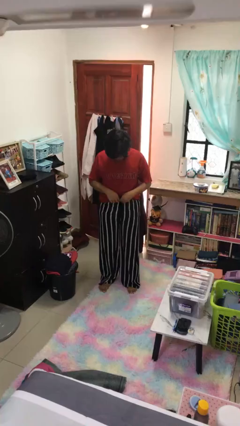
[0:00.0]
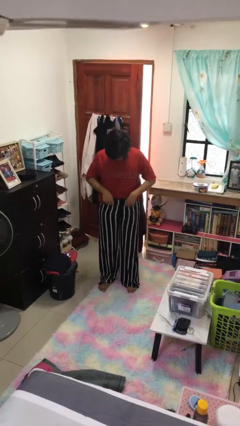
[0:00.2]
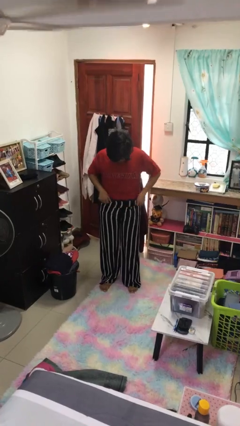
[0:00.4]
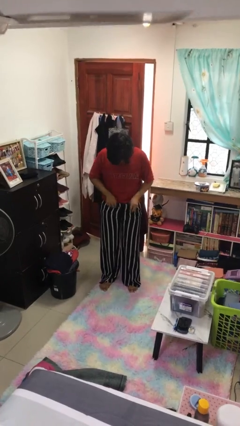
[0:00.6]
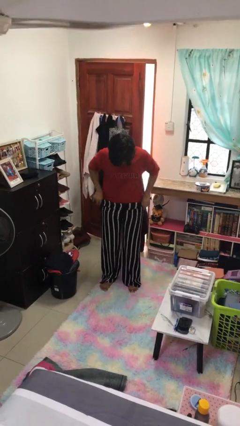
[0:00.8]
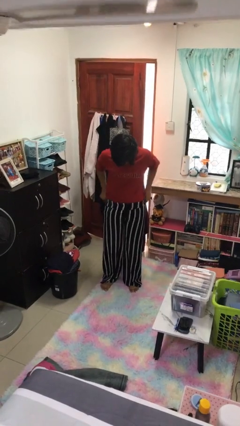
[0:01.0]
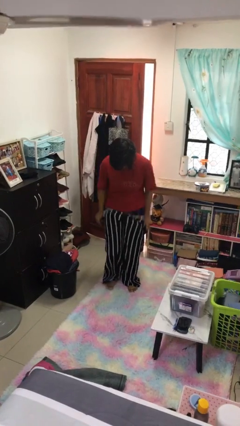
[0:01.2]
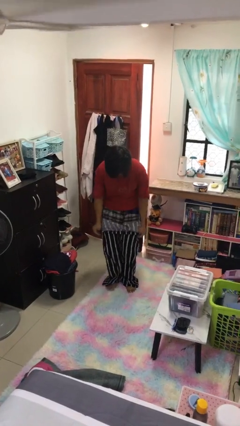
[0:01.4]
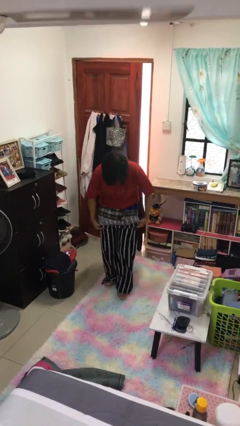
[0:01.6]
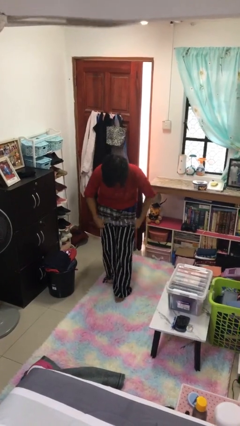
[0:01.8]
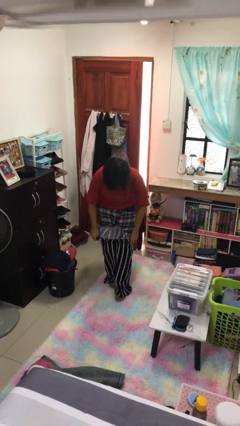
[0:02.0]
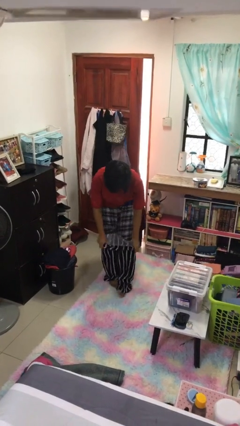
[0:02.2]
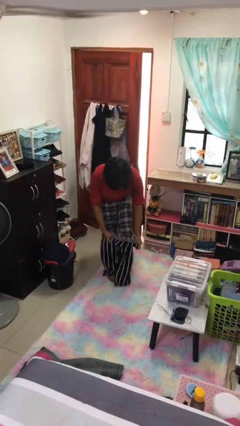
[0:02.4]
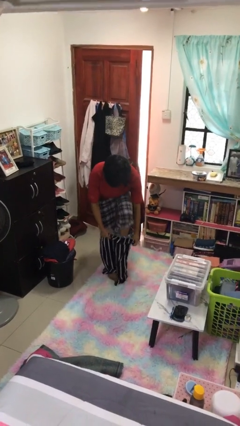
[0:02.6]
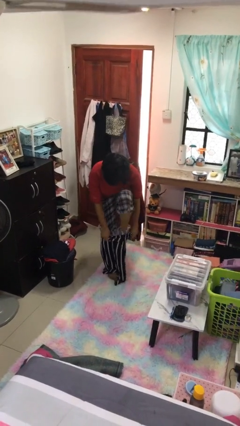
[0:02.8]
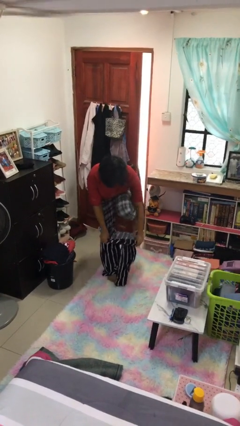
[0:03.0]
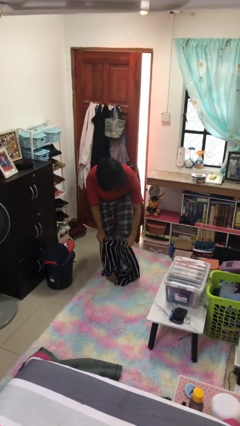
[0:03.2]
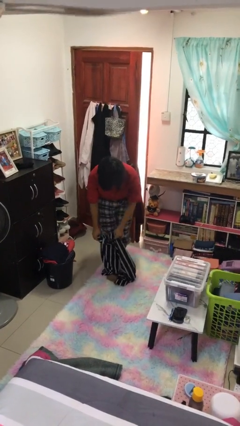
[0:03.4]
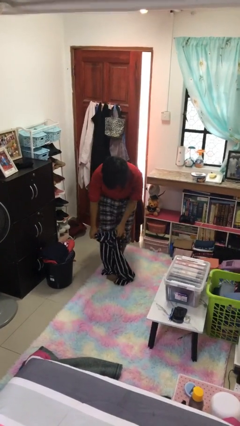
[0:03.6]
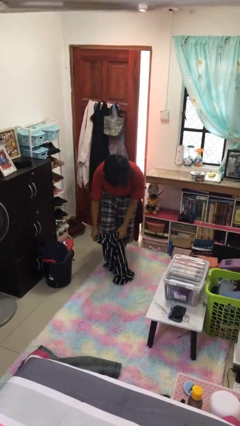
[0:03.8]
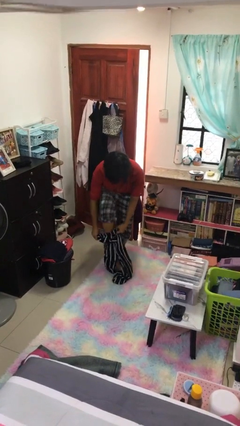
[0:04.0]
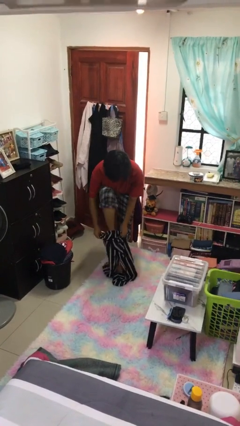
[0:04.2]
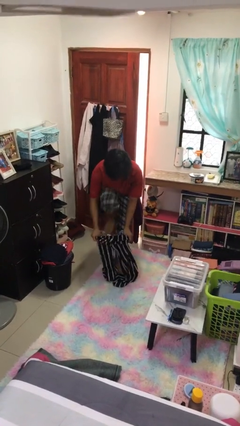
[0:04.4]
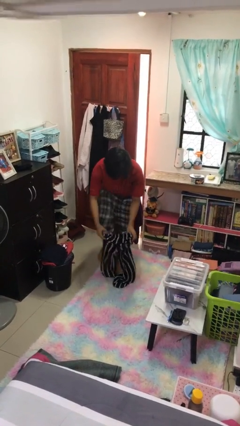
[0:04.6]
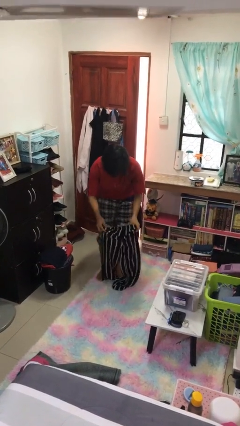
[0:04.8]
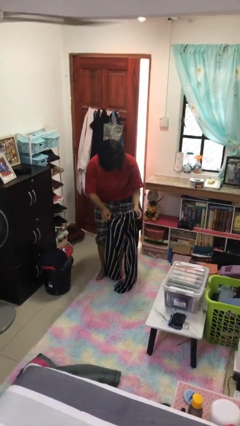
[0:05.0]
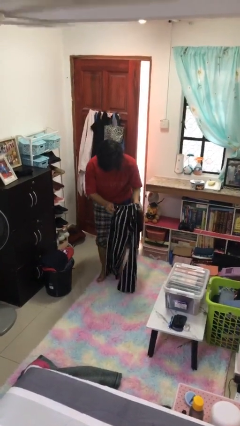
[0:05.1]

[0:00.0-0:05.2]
person takes off pants

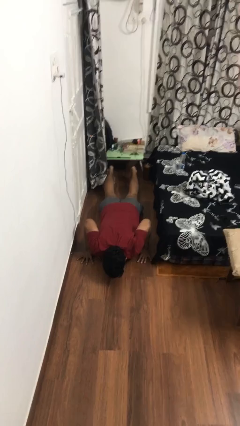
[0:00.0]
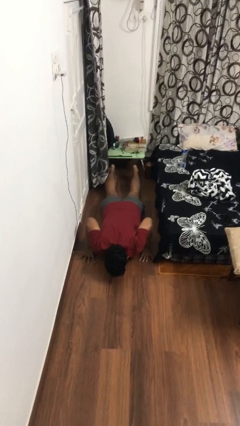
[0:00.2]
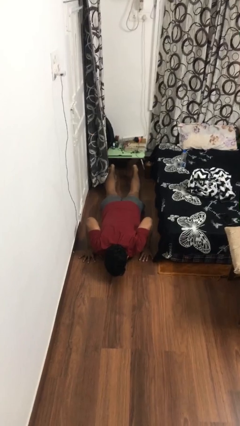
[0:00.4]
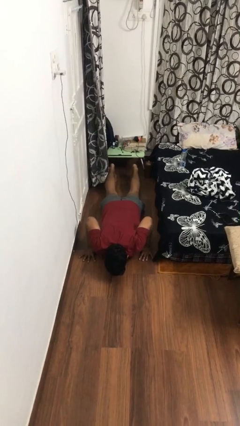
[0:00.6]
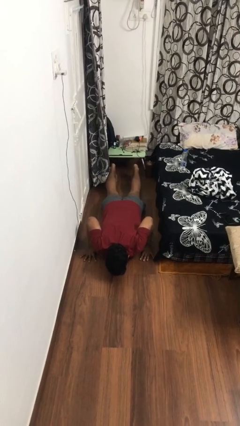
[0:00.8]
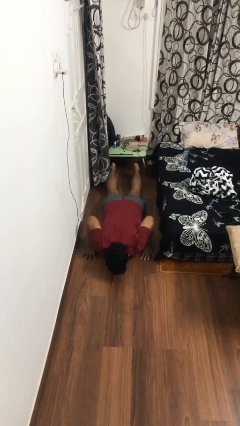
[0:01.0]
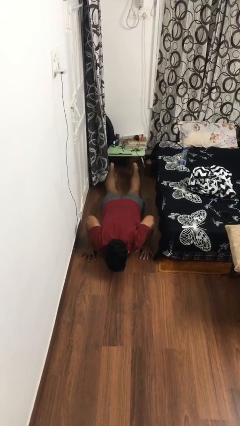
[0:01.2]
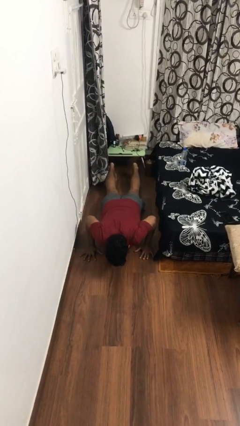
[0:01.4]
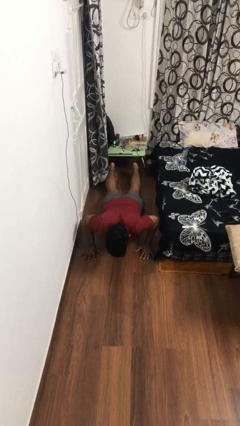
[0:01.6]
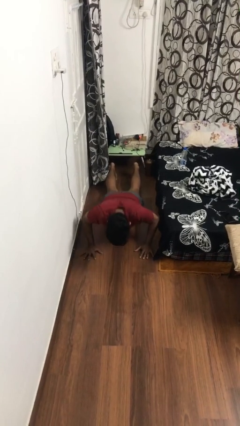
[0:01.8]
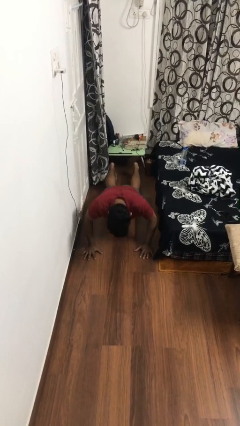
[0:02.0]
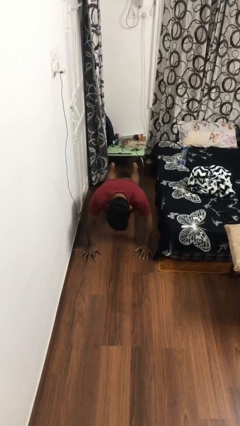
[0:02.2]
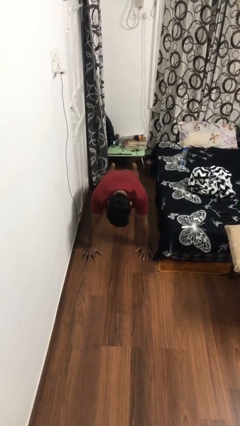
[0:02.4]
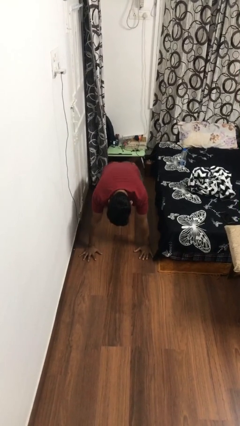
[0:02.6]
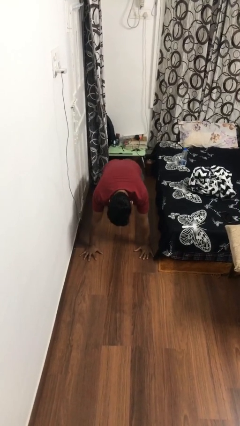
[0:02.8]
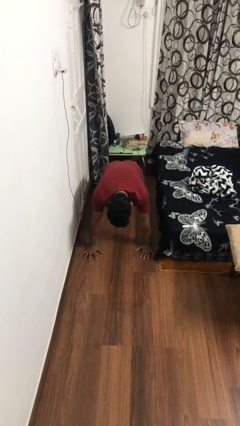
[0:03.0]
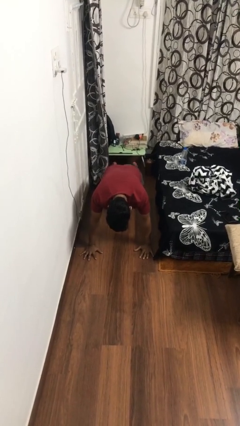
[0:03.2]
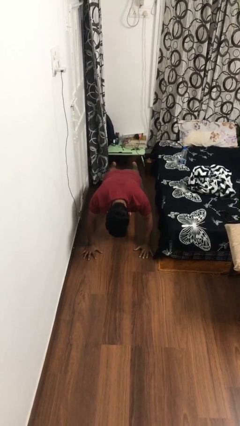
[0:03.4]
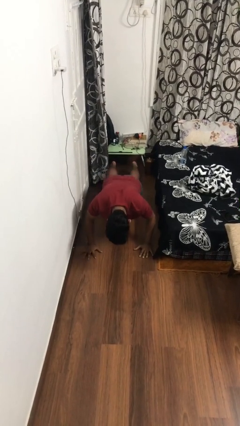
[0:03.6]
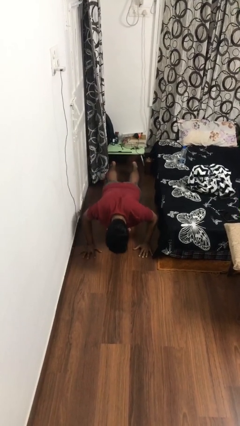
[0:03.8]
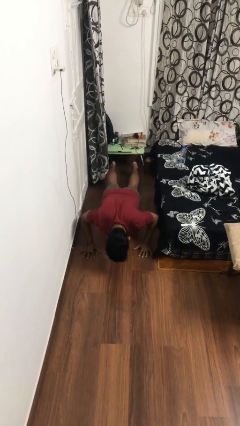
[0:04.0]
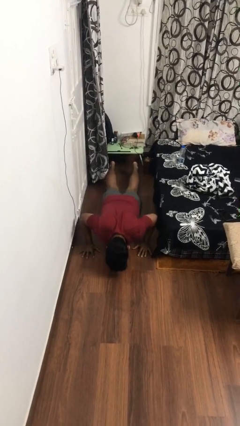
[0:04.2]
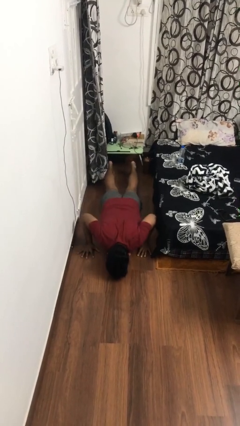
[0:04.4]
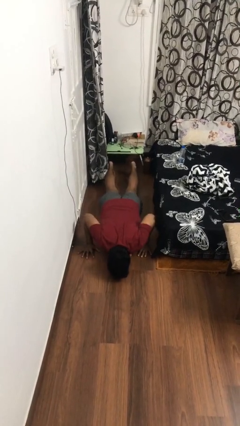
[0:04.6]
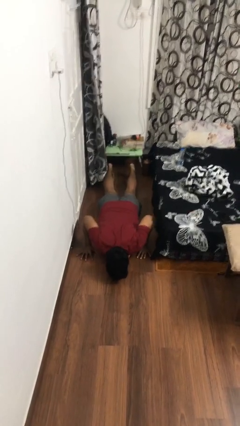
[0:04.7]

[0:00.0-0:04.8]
person exercises with pushup

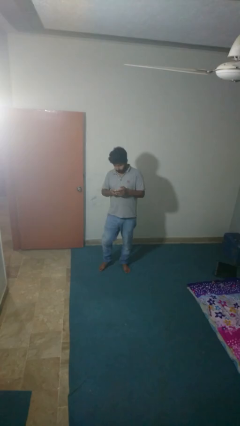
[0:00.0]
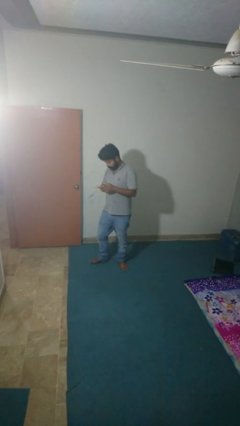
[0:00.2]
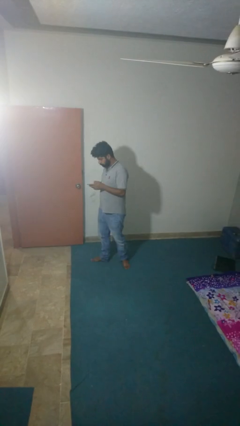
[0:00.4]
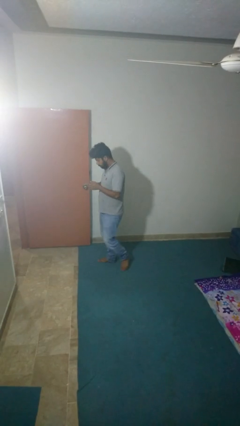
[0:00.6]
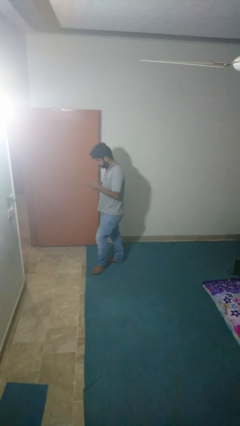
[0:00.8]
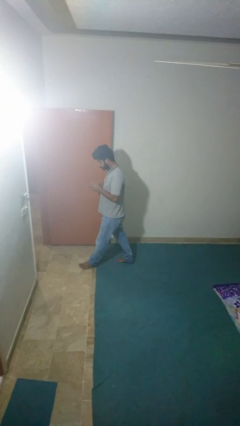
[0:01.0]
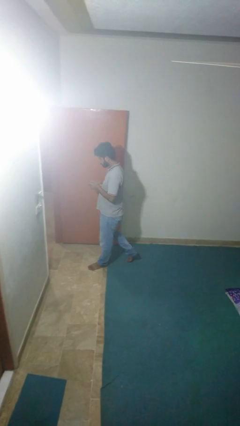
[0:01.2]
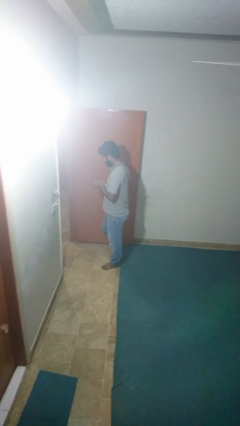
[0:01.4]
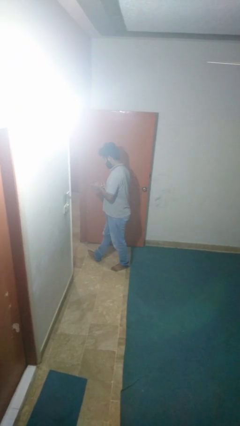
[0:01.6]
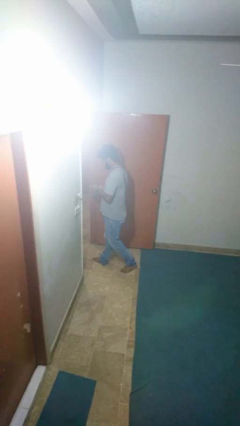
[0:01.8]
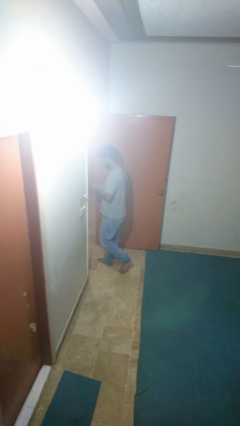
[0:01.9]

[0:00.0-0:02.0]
person exits scene through structure

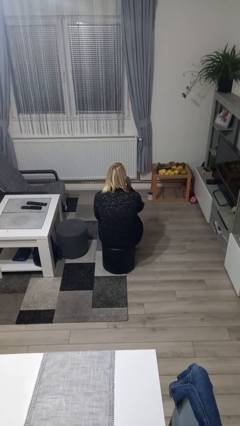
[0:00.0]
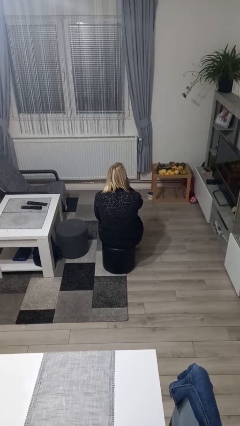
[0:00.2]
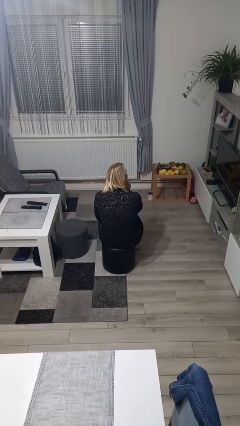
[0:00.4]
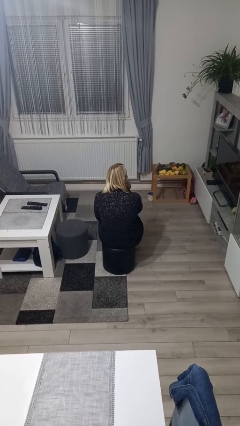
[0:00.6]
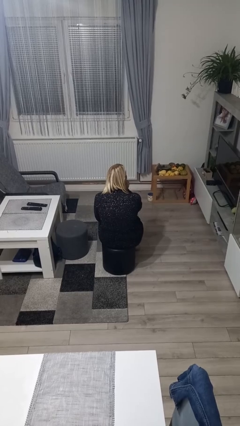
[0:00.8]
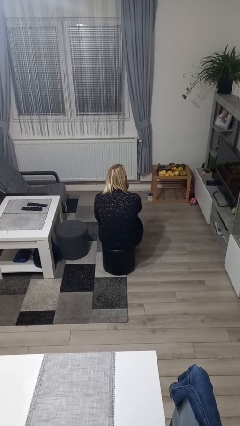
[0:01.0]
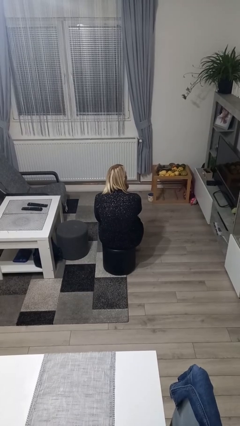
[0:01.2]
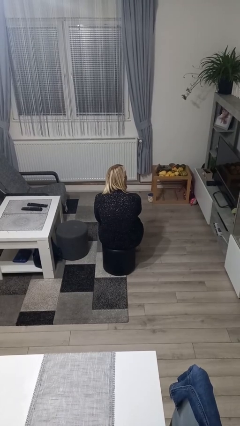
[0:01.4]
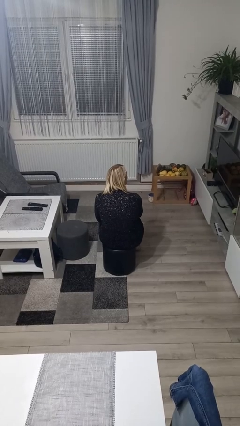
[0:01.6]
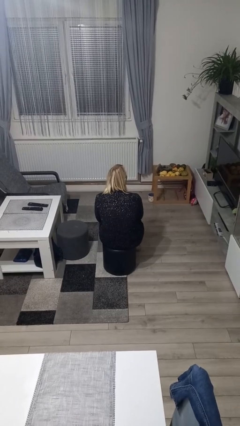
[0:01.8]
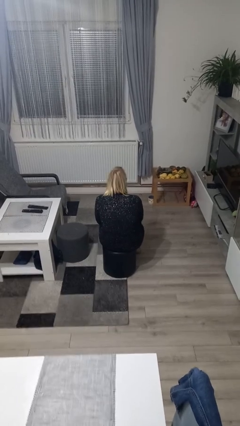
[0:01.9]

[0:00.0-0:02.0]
person strokes chin

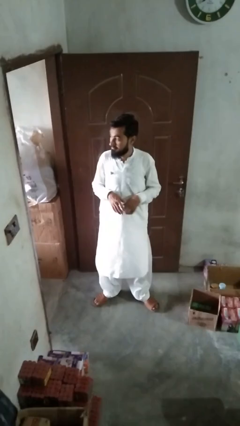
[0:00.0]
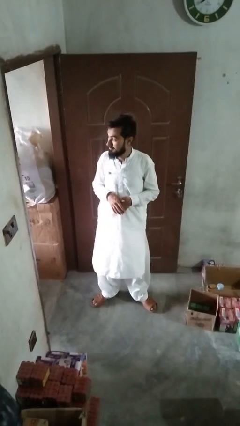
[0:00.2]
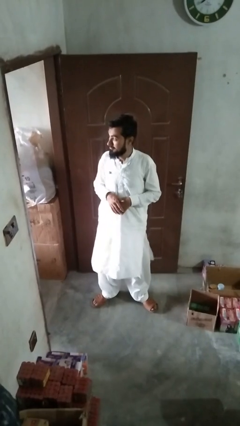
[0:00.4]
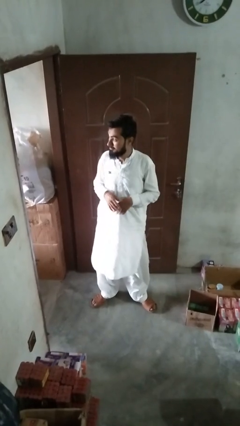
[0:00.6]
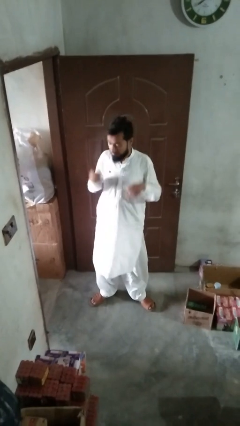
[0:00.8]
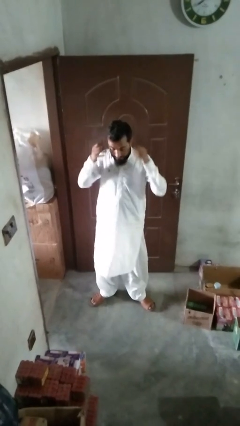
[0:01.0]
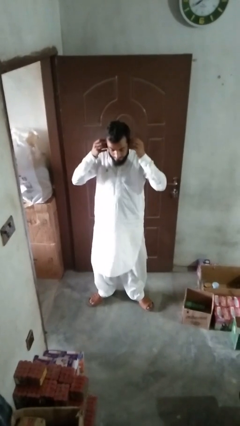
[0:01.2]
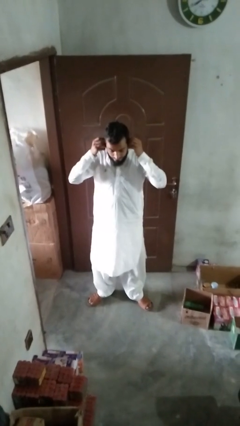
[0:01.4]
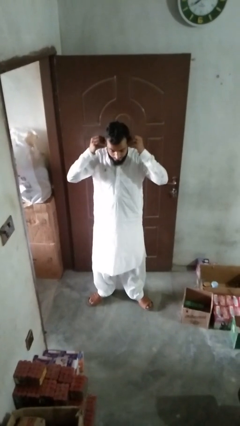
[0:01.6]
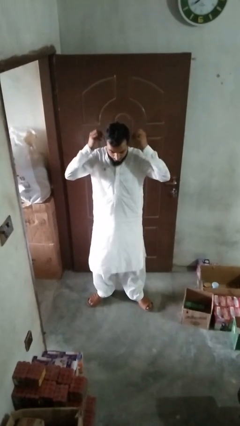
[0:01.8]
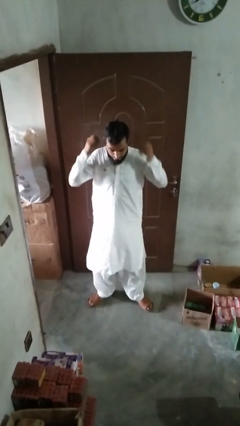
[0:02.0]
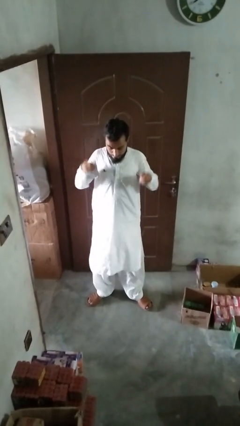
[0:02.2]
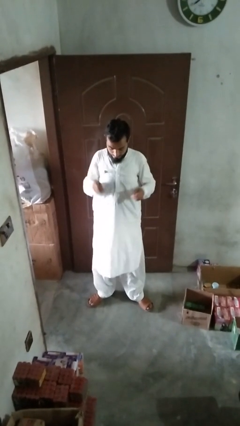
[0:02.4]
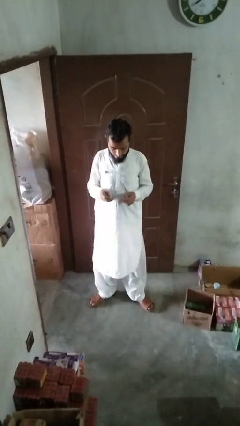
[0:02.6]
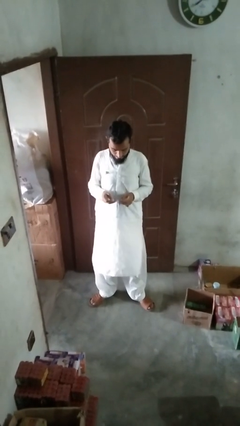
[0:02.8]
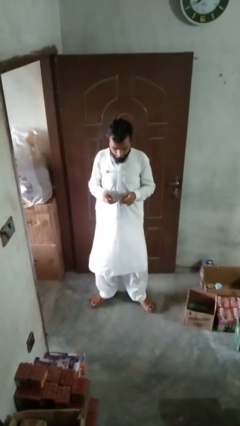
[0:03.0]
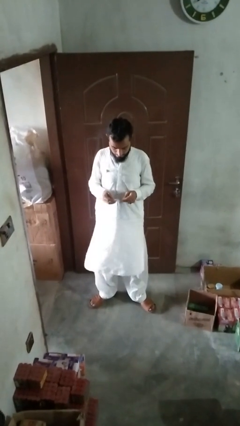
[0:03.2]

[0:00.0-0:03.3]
person takes off earrings

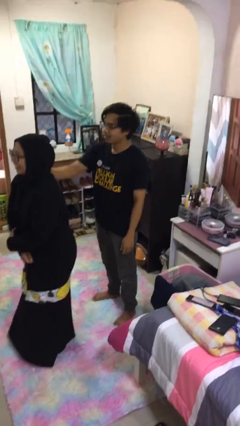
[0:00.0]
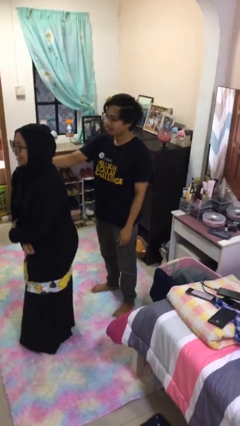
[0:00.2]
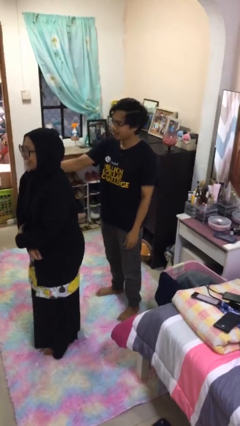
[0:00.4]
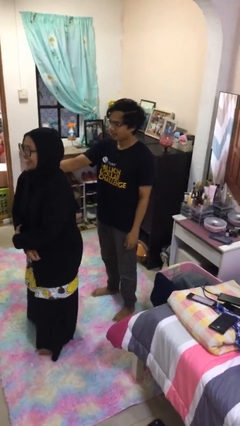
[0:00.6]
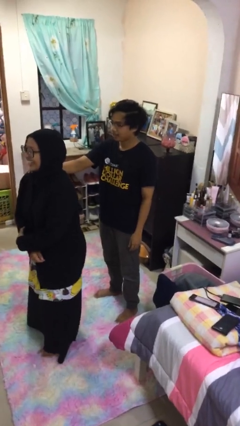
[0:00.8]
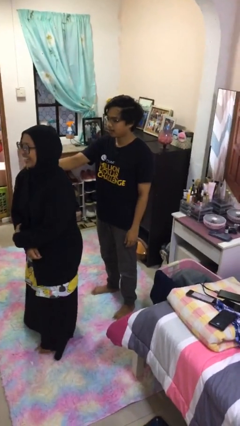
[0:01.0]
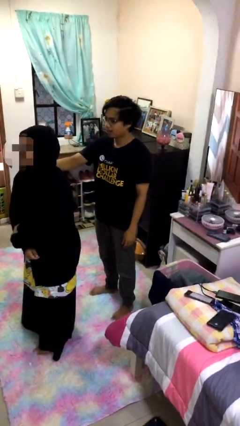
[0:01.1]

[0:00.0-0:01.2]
person grabs person by shoulder
